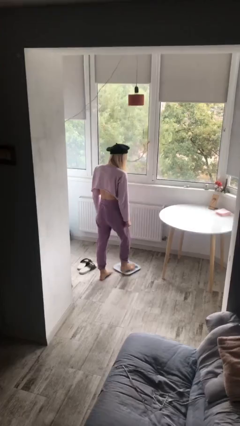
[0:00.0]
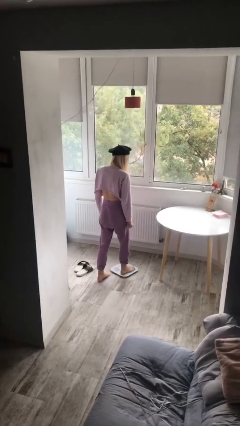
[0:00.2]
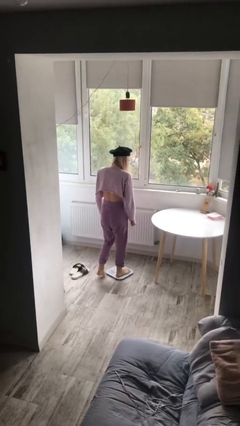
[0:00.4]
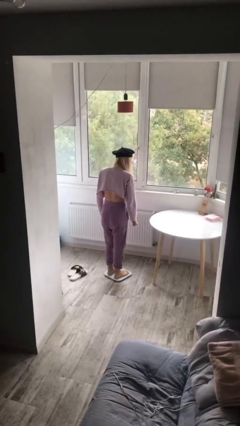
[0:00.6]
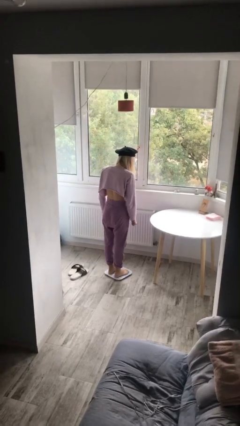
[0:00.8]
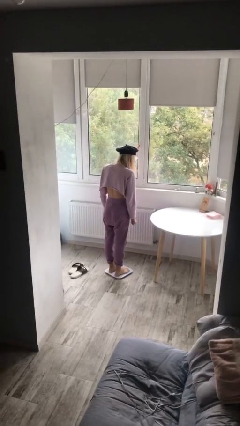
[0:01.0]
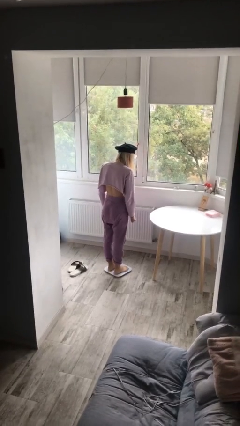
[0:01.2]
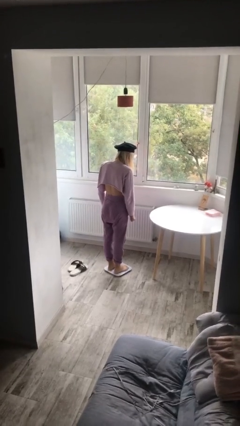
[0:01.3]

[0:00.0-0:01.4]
person uses bodyweight scale

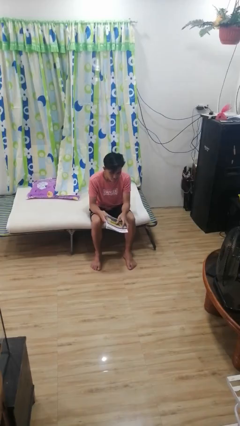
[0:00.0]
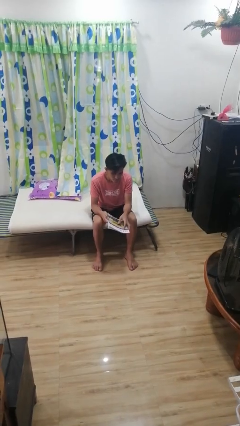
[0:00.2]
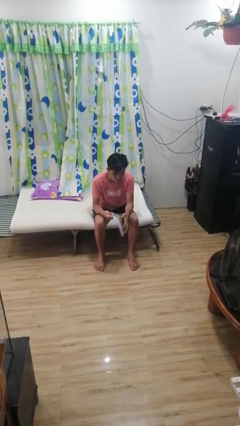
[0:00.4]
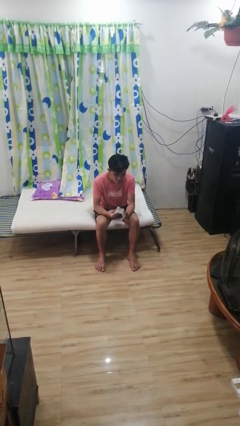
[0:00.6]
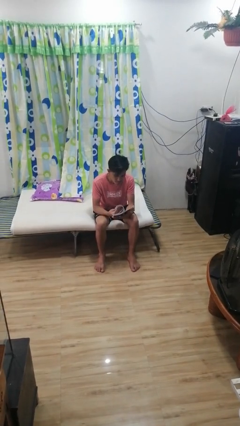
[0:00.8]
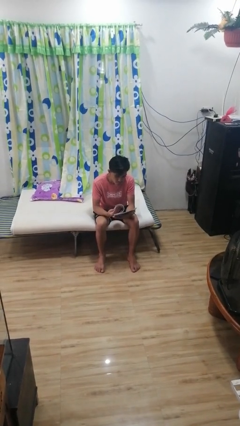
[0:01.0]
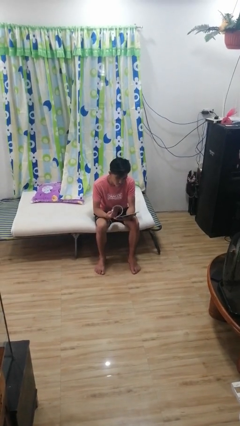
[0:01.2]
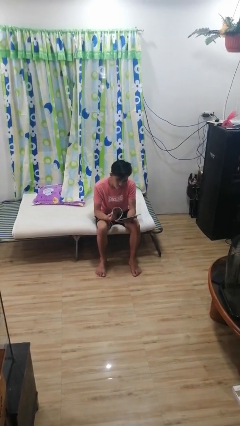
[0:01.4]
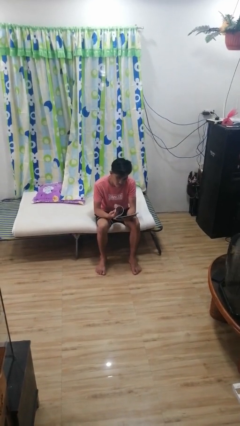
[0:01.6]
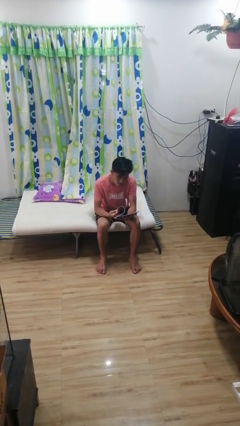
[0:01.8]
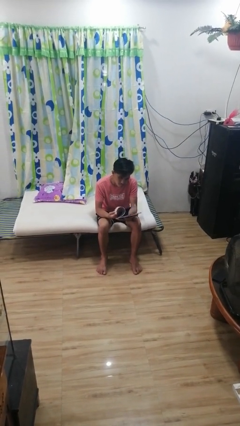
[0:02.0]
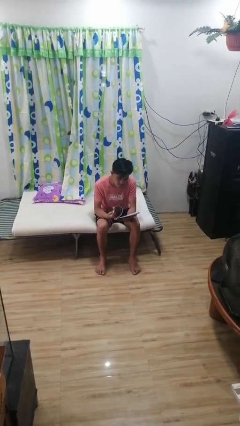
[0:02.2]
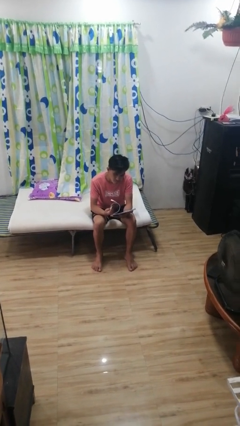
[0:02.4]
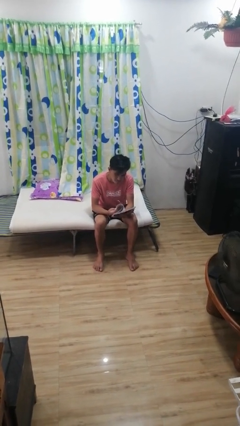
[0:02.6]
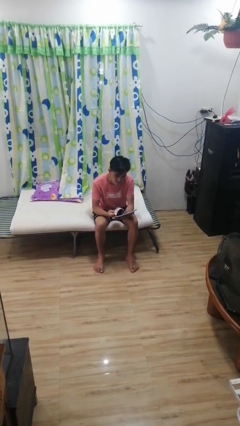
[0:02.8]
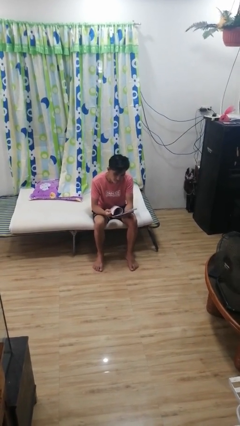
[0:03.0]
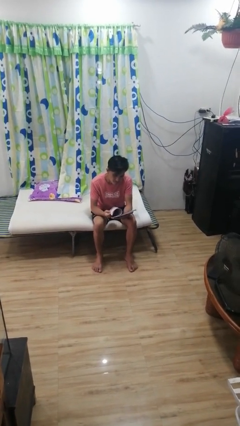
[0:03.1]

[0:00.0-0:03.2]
person reads magazine

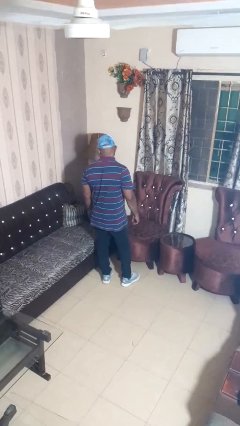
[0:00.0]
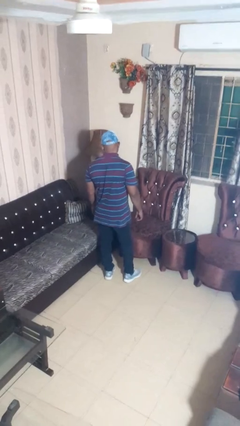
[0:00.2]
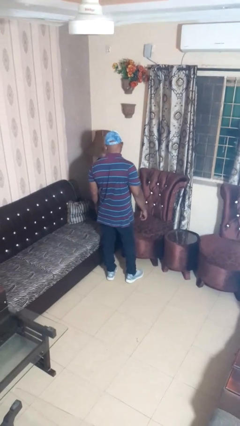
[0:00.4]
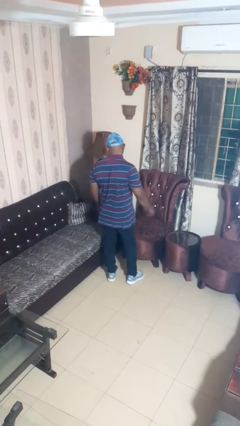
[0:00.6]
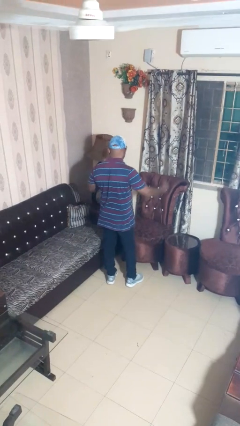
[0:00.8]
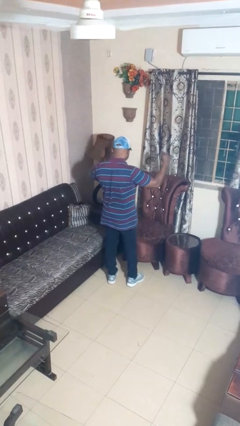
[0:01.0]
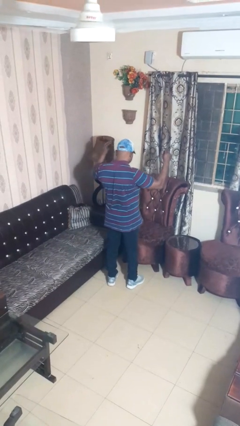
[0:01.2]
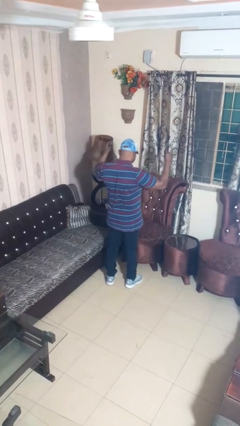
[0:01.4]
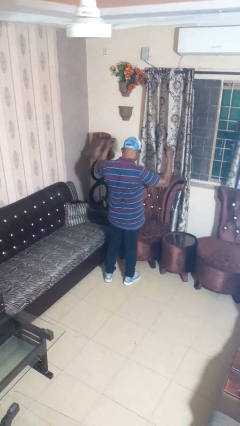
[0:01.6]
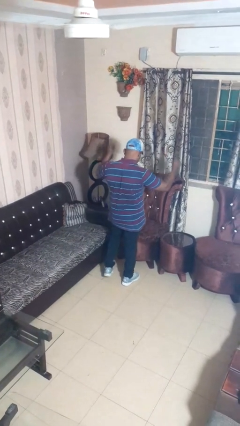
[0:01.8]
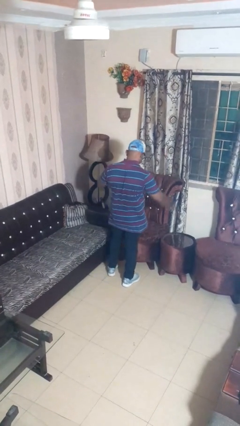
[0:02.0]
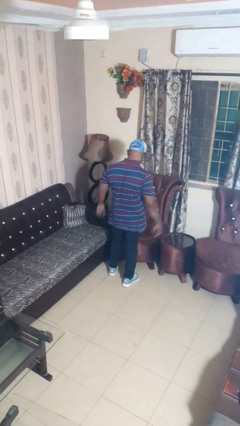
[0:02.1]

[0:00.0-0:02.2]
person snaps fingers

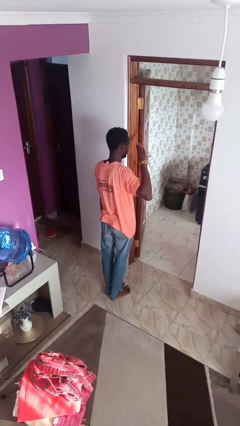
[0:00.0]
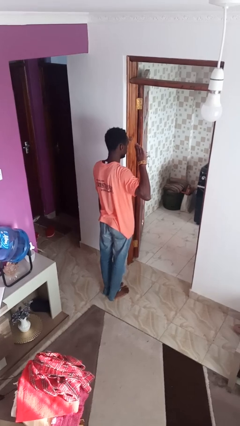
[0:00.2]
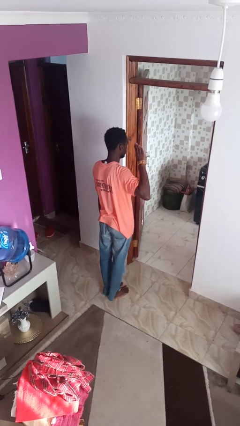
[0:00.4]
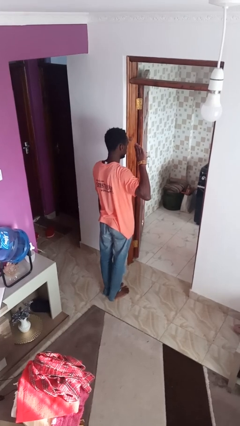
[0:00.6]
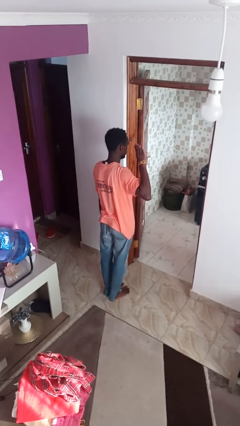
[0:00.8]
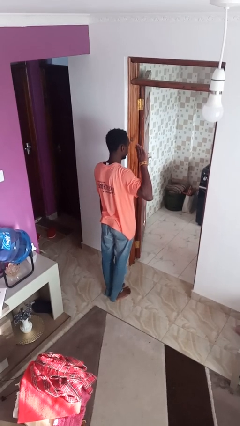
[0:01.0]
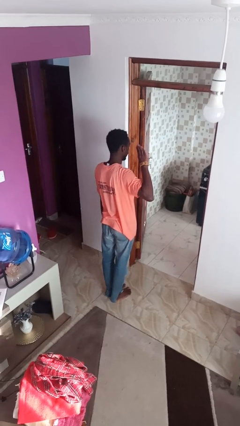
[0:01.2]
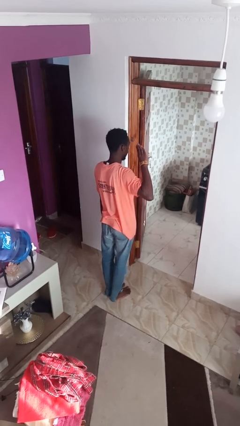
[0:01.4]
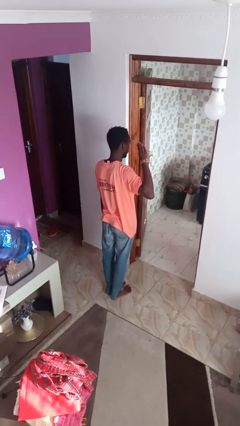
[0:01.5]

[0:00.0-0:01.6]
person salutes

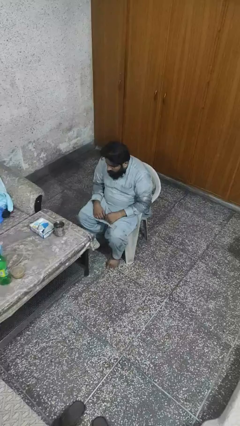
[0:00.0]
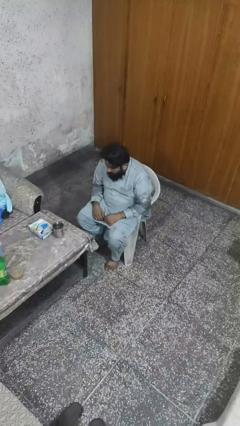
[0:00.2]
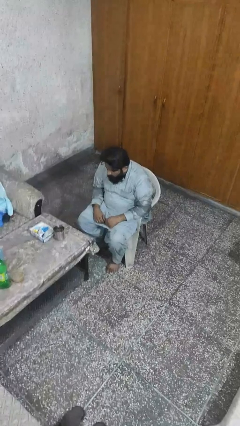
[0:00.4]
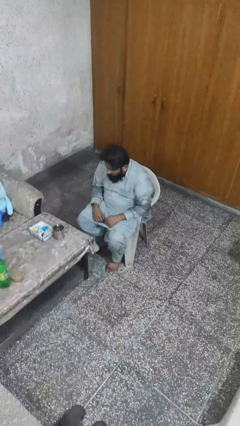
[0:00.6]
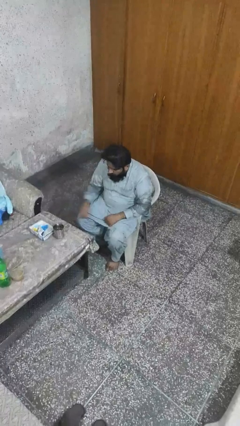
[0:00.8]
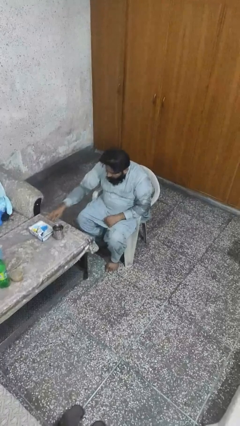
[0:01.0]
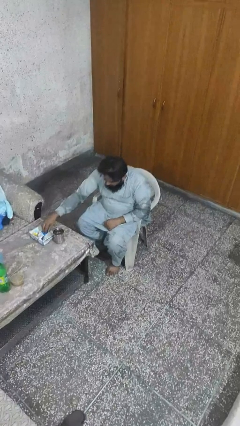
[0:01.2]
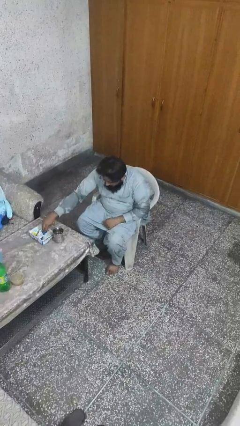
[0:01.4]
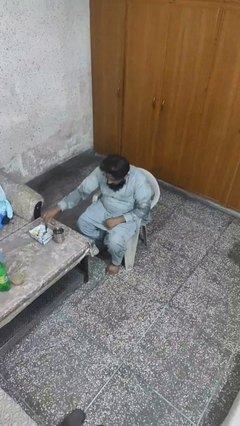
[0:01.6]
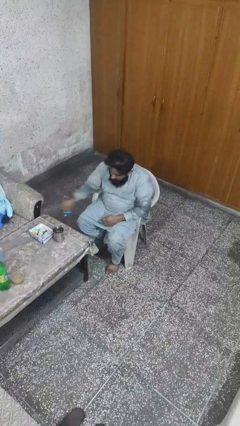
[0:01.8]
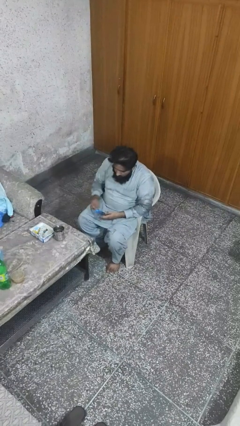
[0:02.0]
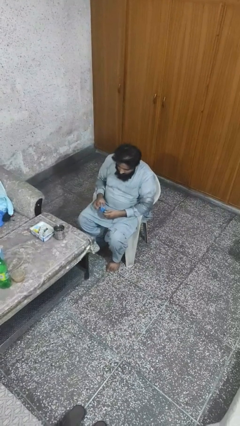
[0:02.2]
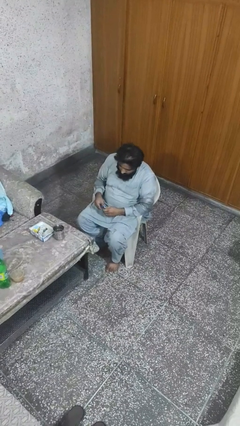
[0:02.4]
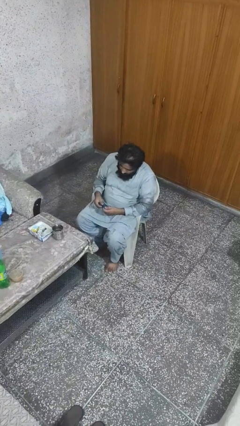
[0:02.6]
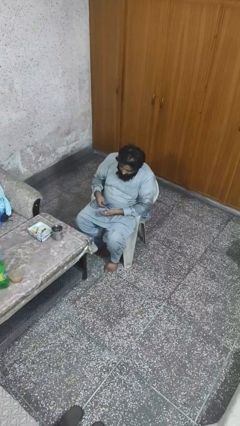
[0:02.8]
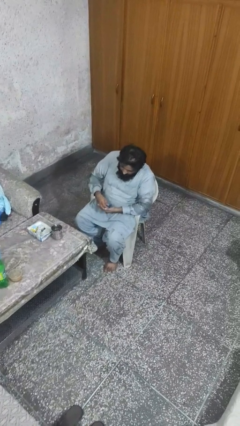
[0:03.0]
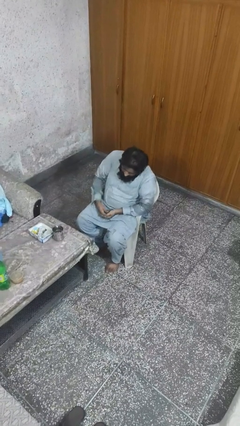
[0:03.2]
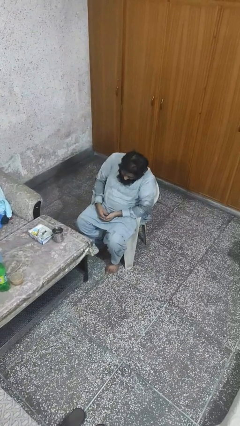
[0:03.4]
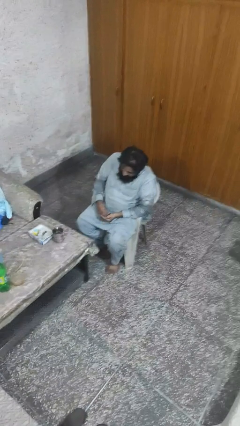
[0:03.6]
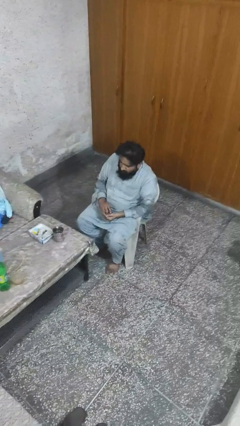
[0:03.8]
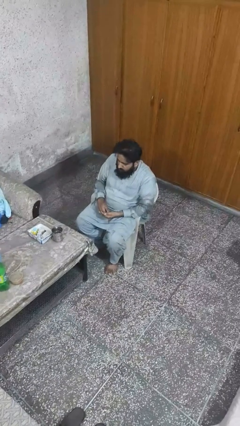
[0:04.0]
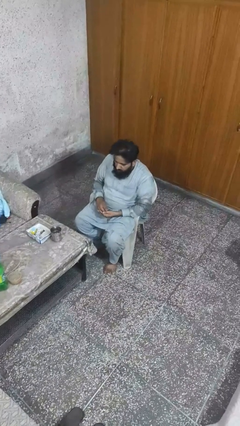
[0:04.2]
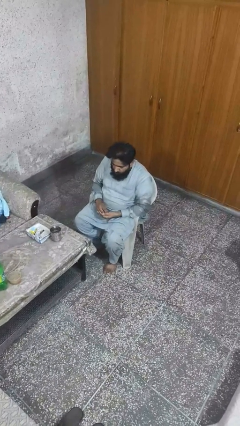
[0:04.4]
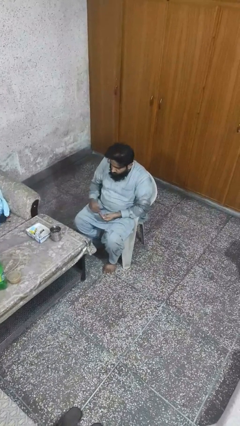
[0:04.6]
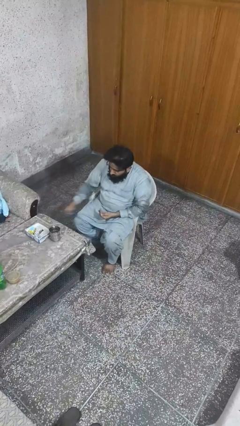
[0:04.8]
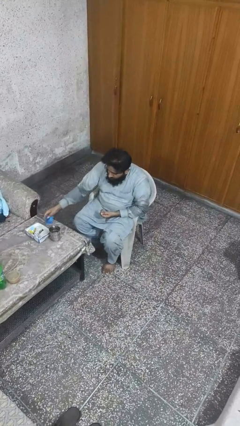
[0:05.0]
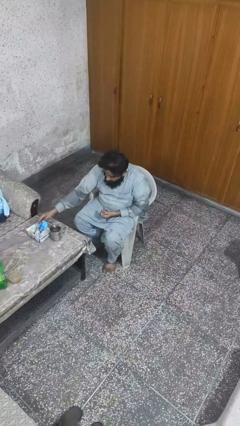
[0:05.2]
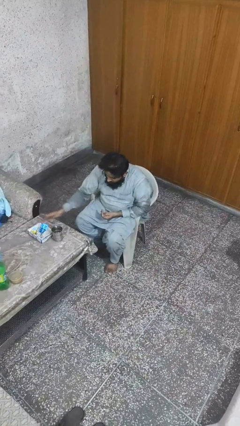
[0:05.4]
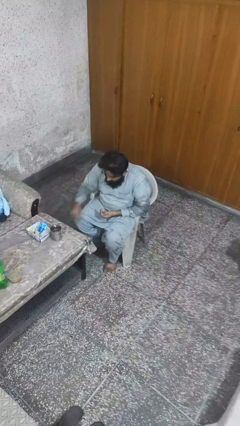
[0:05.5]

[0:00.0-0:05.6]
person takes medicine pills

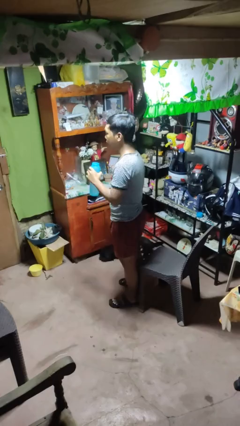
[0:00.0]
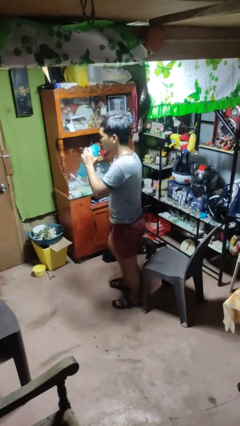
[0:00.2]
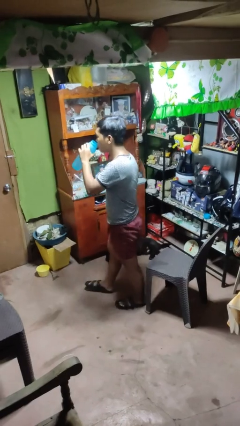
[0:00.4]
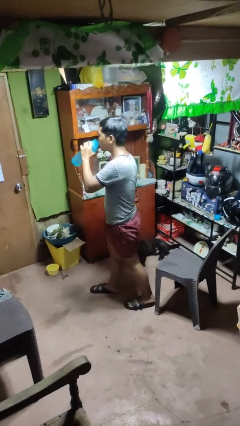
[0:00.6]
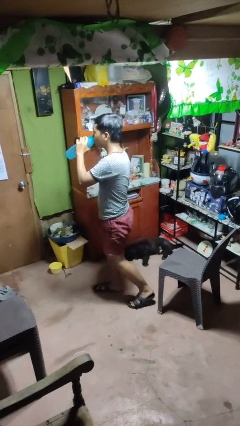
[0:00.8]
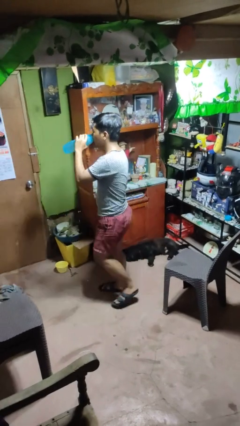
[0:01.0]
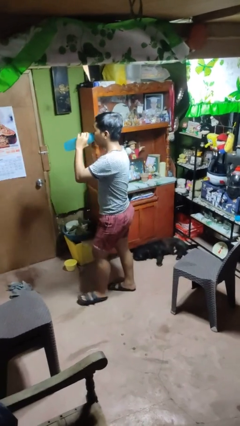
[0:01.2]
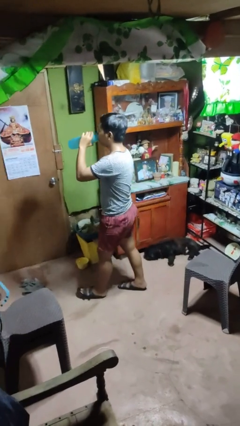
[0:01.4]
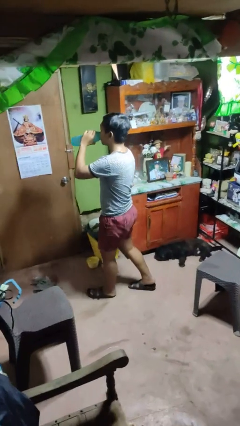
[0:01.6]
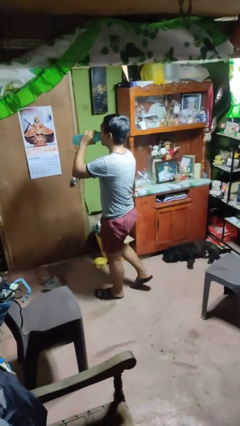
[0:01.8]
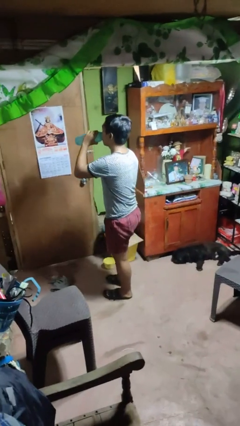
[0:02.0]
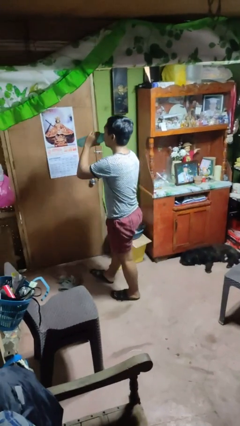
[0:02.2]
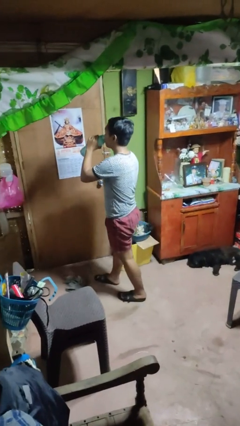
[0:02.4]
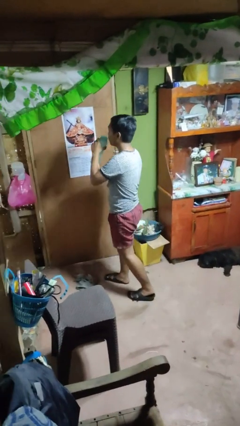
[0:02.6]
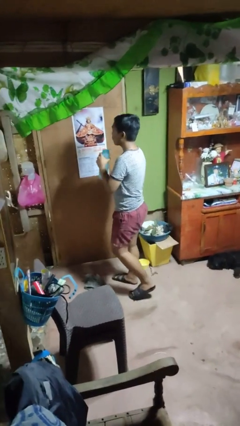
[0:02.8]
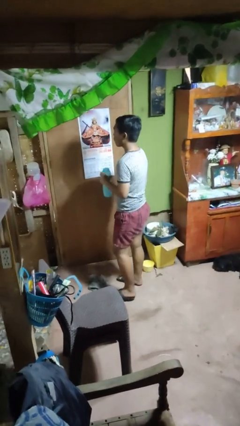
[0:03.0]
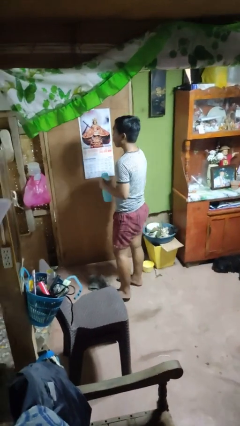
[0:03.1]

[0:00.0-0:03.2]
person drinks from bottle
